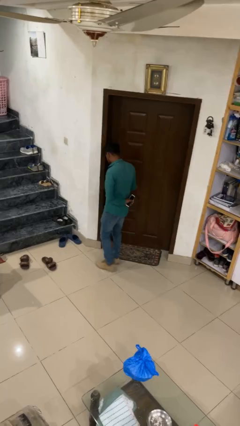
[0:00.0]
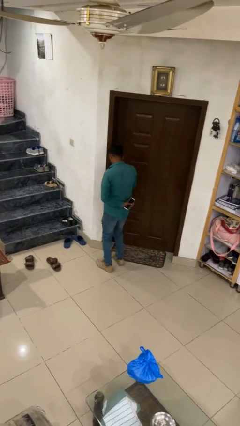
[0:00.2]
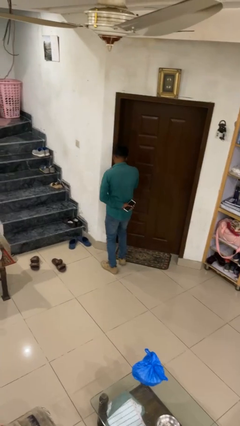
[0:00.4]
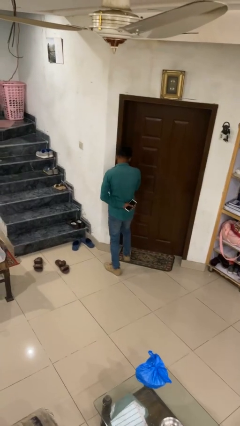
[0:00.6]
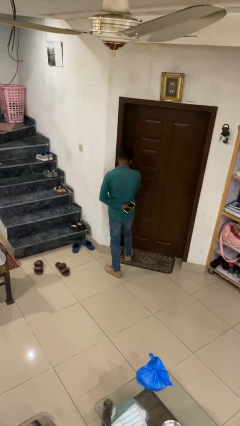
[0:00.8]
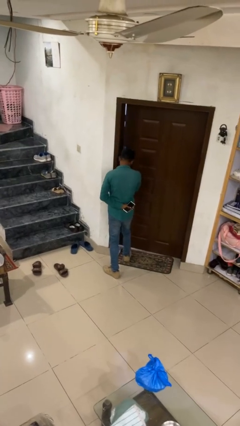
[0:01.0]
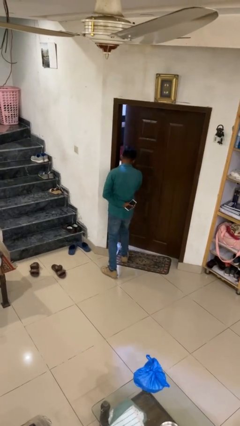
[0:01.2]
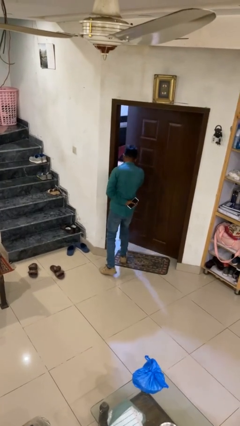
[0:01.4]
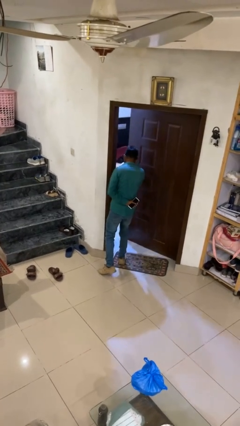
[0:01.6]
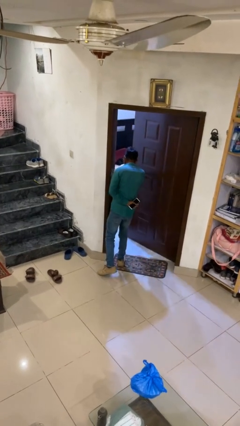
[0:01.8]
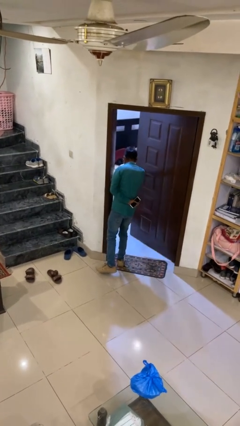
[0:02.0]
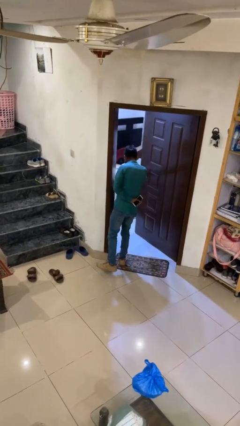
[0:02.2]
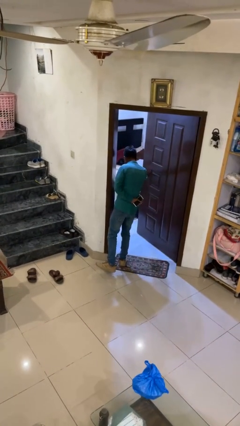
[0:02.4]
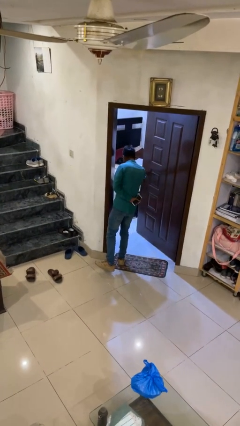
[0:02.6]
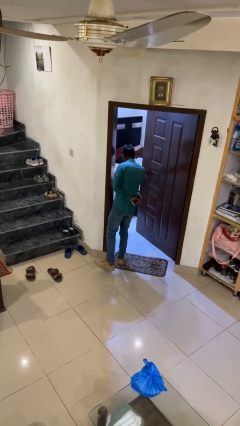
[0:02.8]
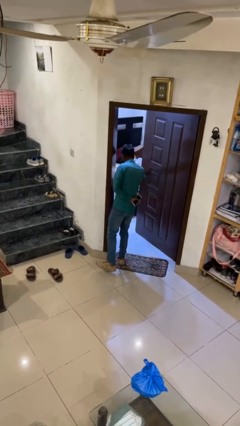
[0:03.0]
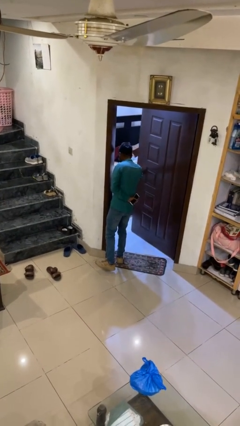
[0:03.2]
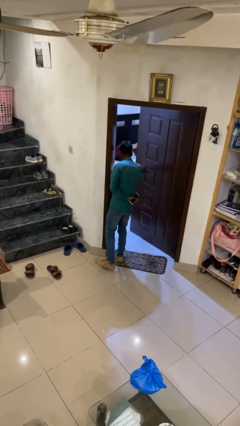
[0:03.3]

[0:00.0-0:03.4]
person opens facility door

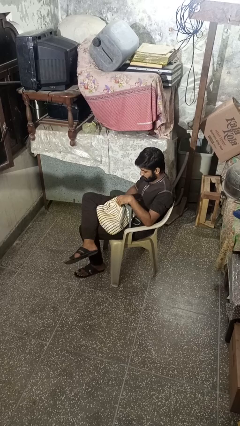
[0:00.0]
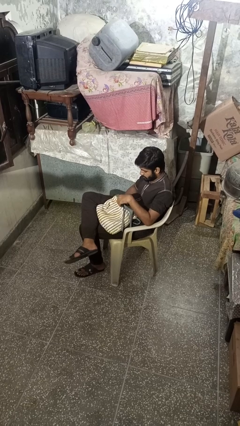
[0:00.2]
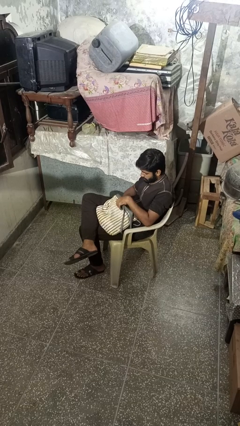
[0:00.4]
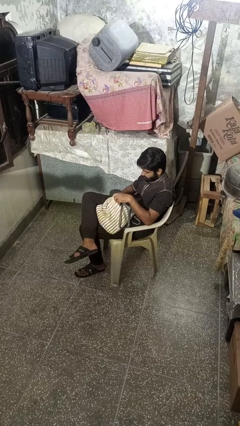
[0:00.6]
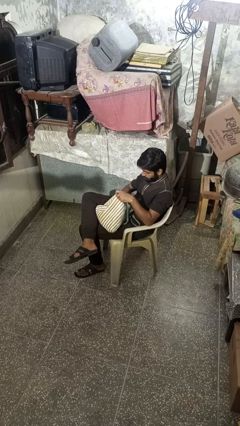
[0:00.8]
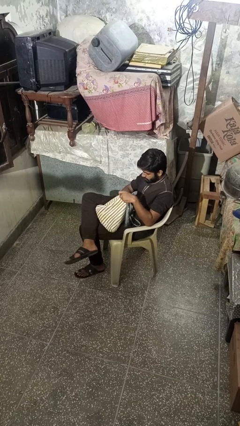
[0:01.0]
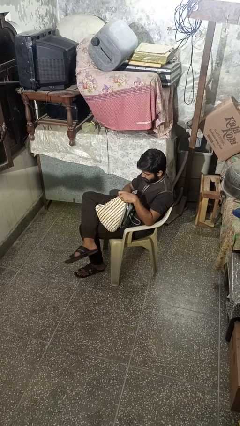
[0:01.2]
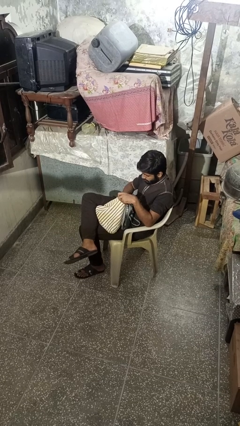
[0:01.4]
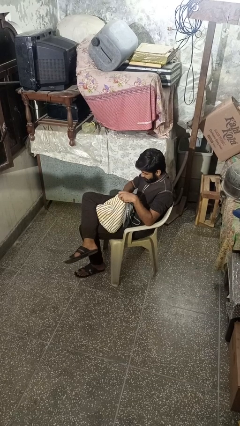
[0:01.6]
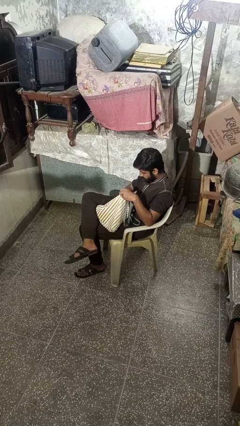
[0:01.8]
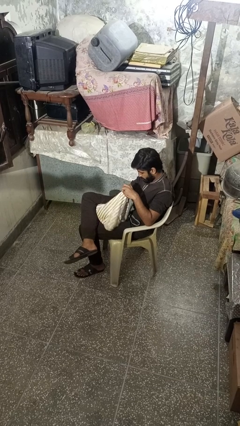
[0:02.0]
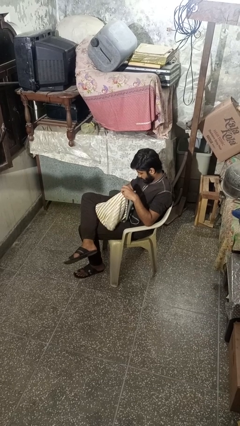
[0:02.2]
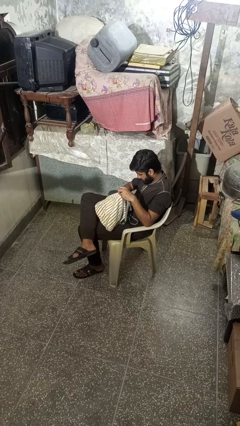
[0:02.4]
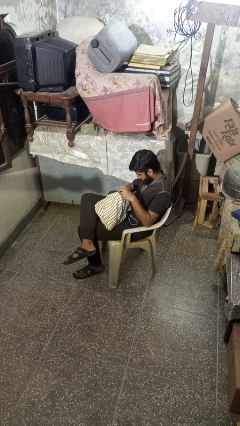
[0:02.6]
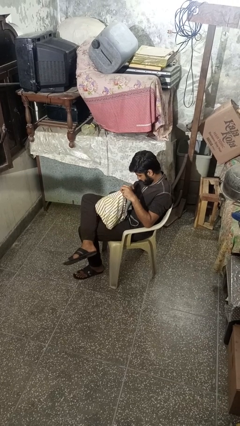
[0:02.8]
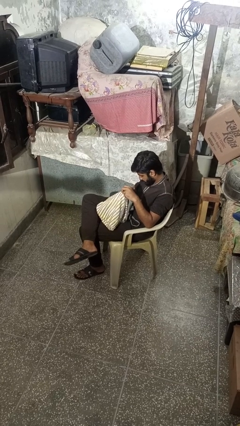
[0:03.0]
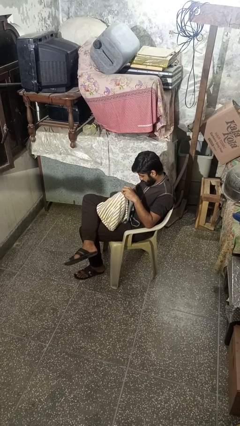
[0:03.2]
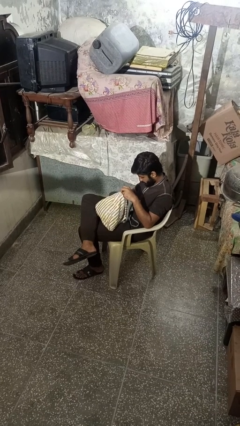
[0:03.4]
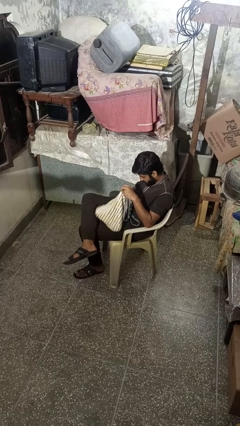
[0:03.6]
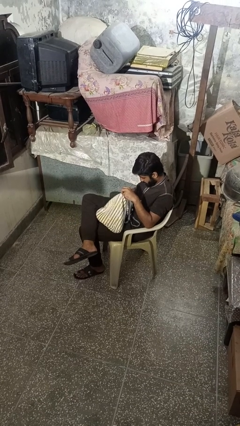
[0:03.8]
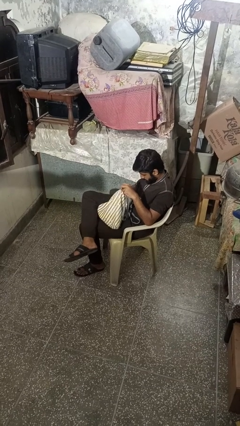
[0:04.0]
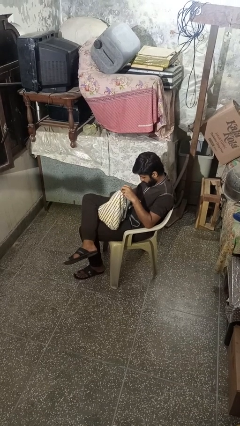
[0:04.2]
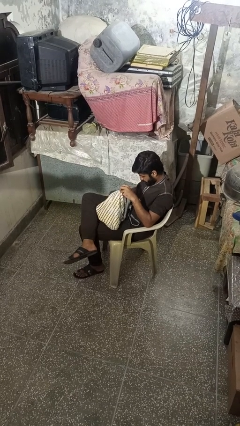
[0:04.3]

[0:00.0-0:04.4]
person searches in purse

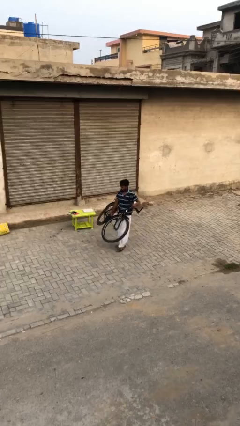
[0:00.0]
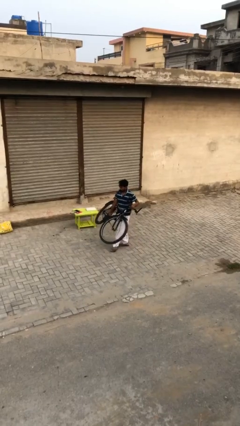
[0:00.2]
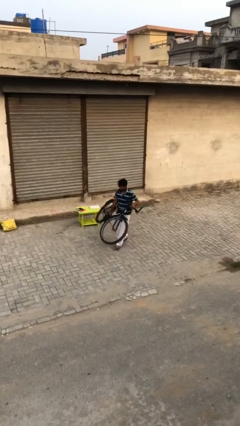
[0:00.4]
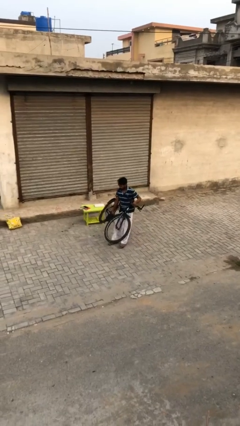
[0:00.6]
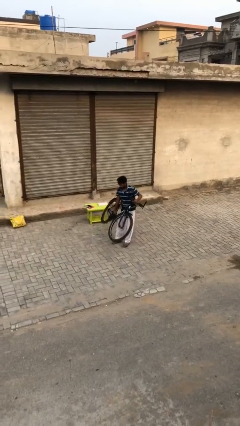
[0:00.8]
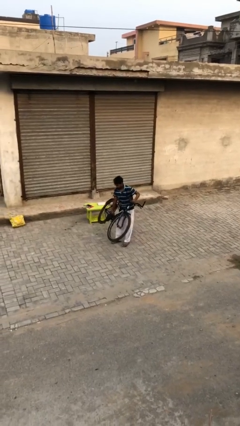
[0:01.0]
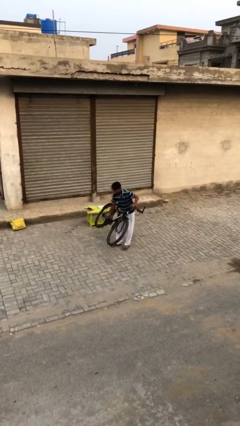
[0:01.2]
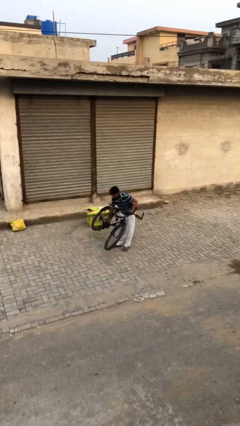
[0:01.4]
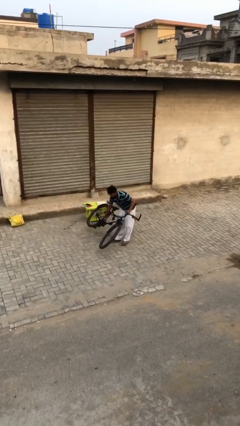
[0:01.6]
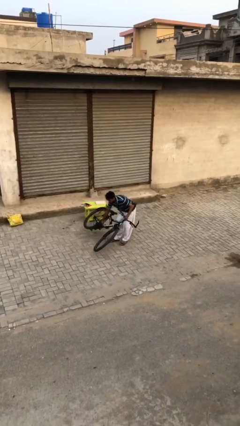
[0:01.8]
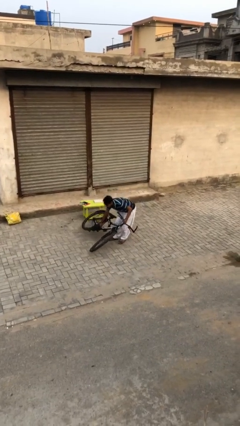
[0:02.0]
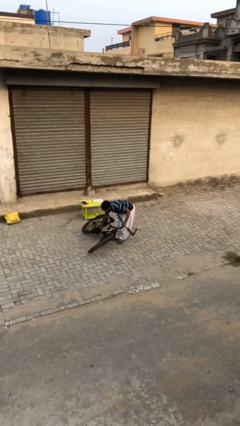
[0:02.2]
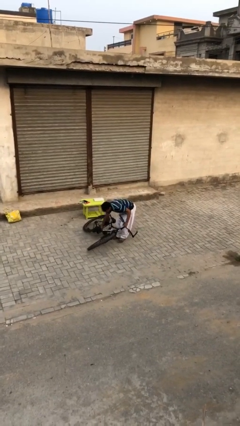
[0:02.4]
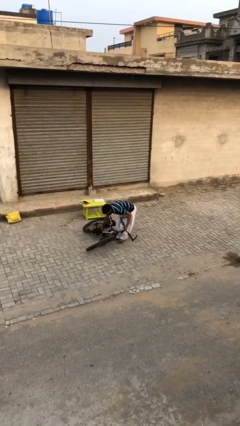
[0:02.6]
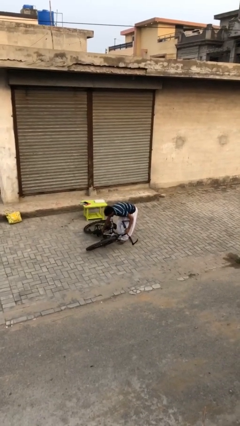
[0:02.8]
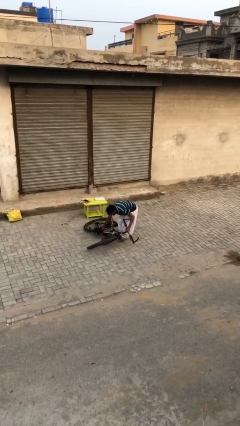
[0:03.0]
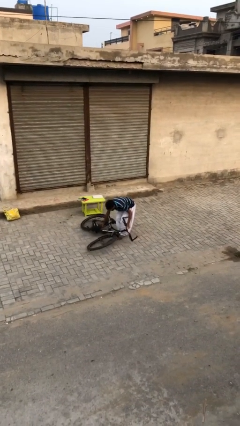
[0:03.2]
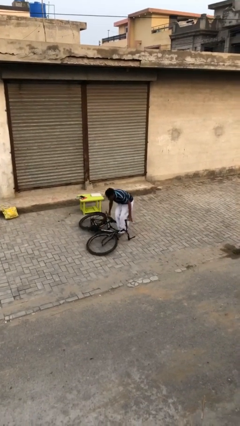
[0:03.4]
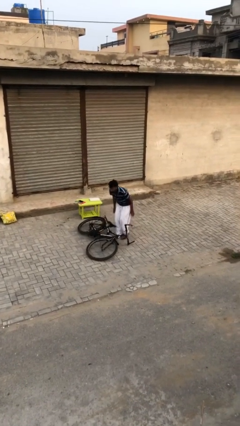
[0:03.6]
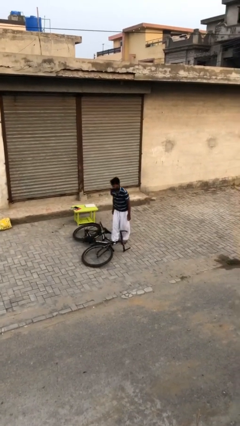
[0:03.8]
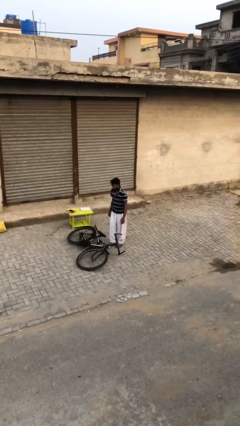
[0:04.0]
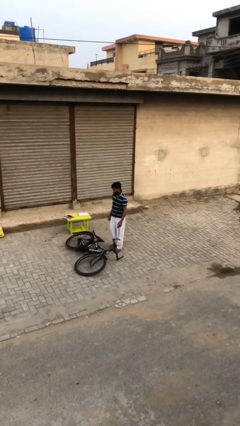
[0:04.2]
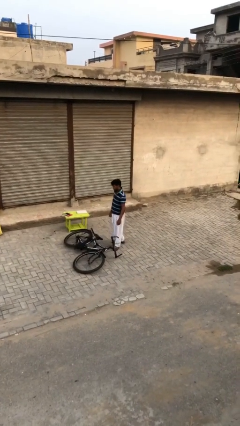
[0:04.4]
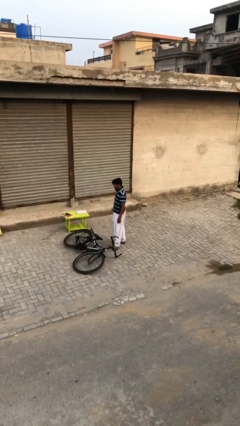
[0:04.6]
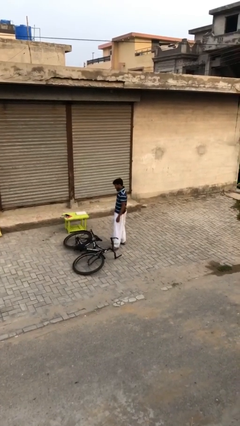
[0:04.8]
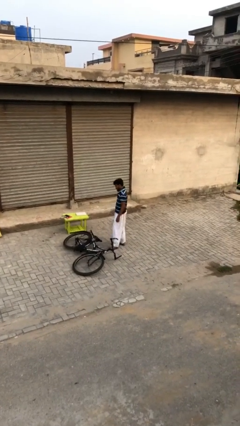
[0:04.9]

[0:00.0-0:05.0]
person puts down object on floor

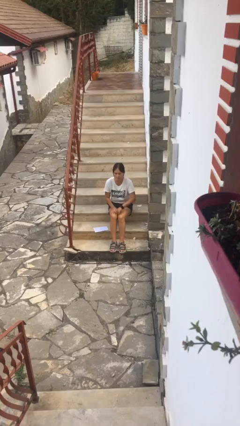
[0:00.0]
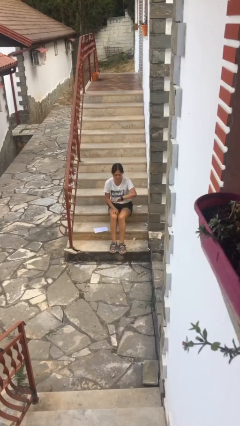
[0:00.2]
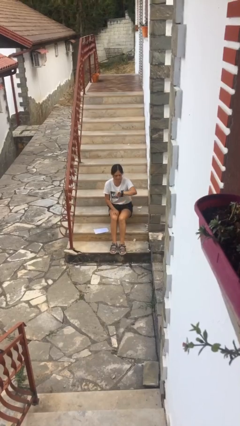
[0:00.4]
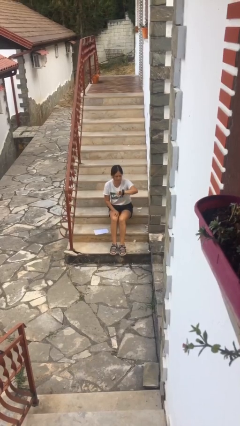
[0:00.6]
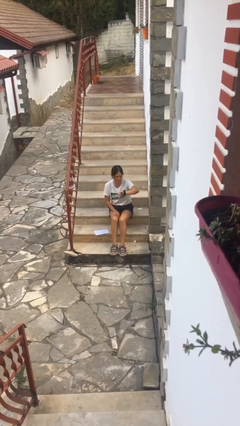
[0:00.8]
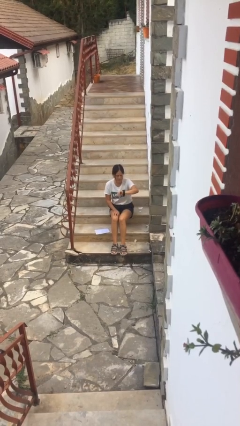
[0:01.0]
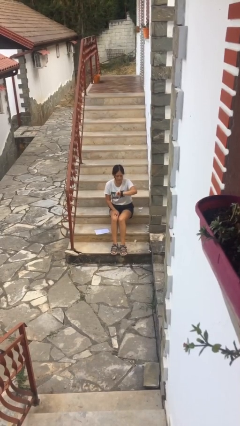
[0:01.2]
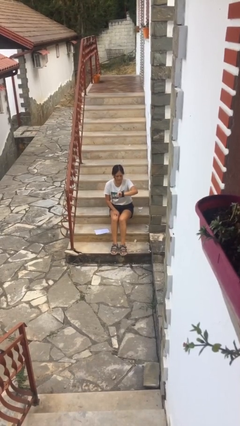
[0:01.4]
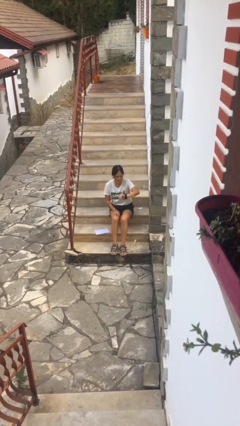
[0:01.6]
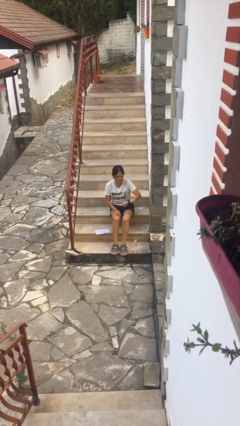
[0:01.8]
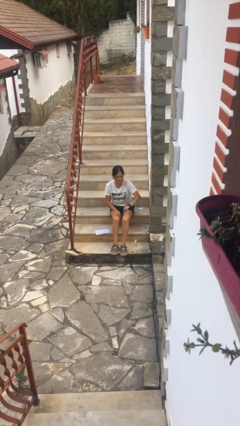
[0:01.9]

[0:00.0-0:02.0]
person looks at wristwatch

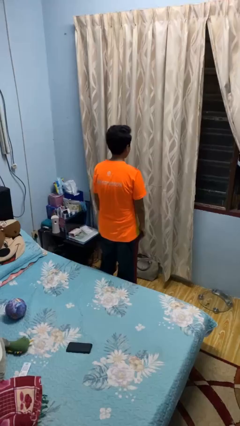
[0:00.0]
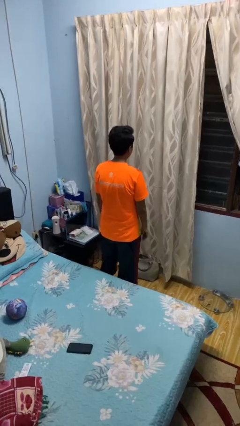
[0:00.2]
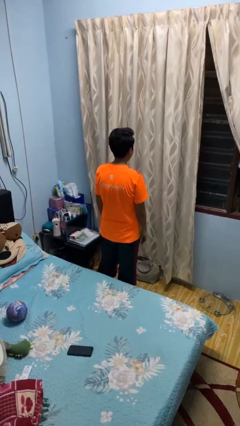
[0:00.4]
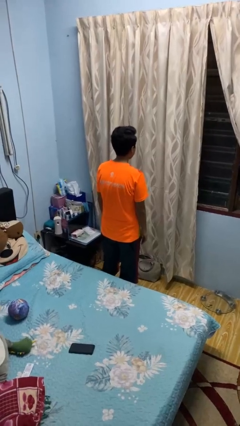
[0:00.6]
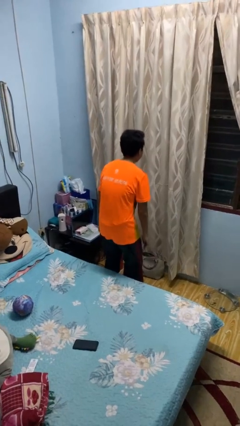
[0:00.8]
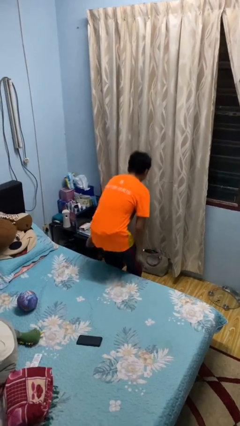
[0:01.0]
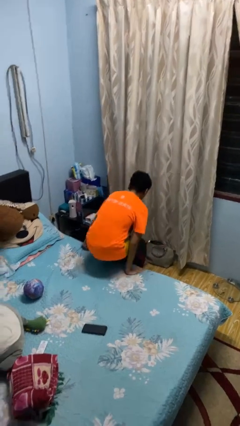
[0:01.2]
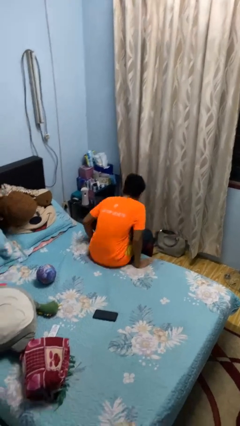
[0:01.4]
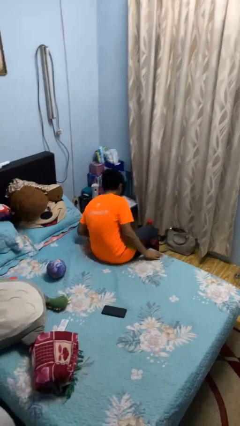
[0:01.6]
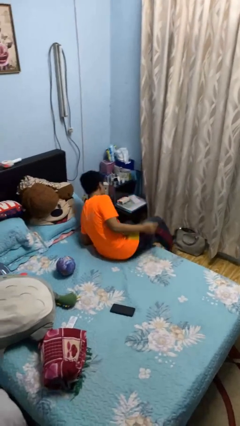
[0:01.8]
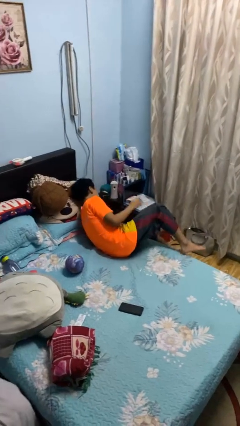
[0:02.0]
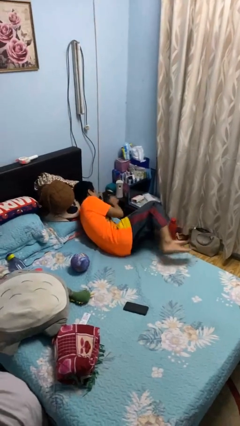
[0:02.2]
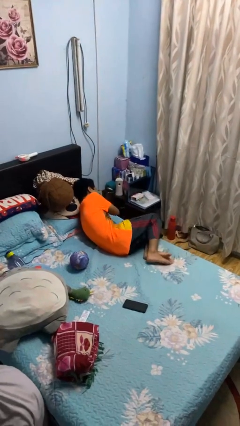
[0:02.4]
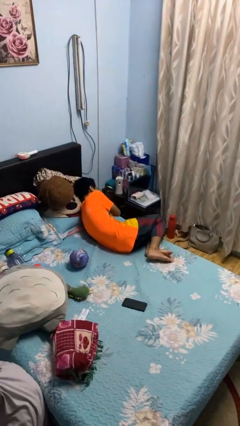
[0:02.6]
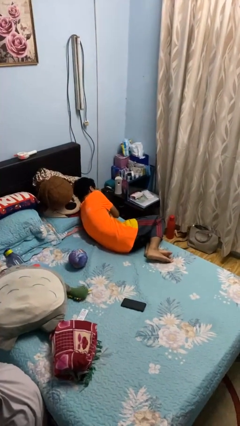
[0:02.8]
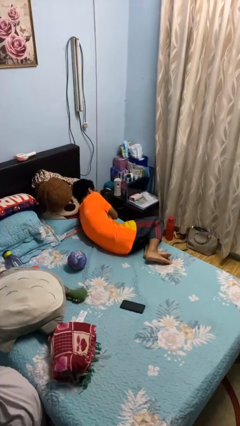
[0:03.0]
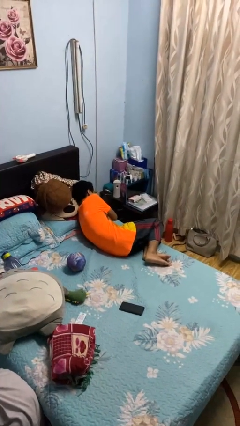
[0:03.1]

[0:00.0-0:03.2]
person lies down on bed
